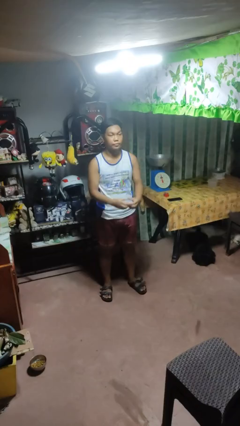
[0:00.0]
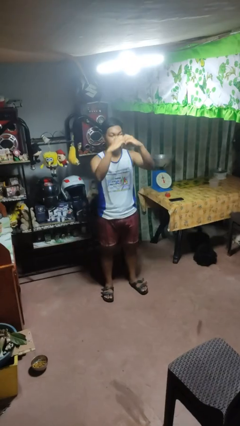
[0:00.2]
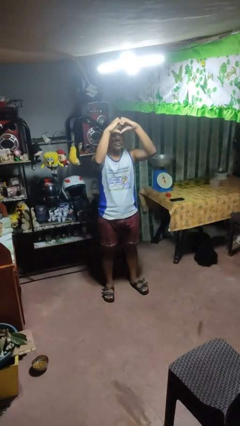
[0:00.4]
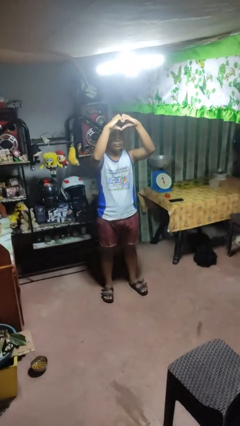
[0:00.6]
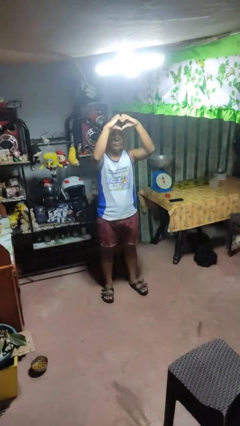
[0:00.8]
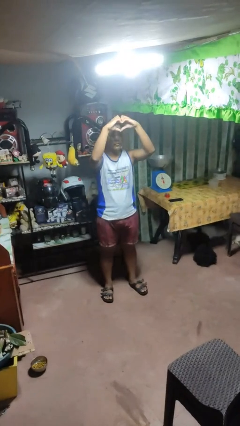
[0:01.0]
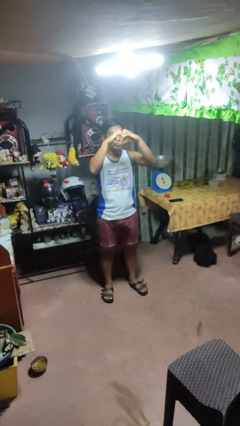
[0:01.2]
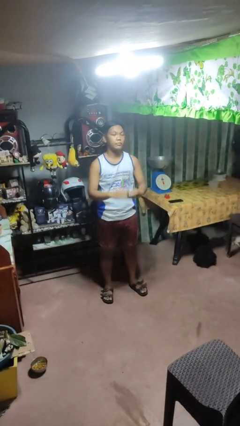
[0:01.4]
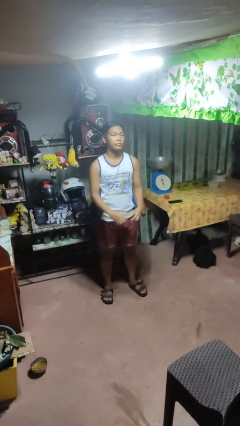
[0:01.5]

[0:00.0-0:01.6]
person gestures heart

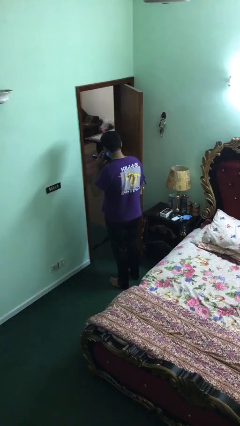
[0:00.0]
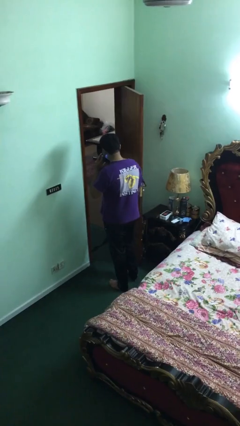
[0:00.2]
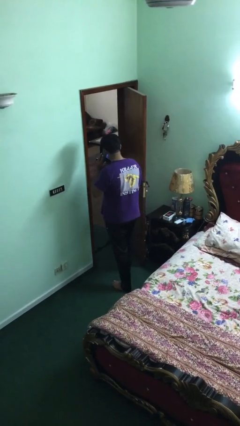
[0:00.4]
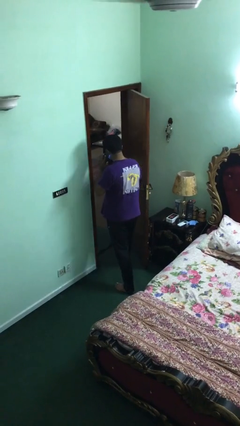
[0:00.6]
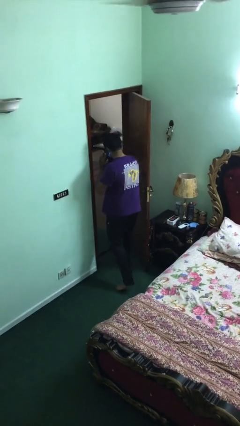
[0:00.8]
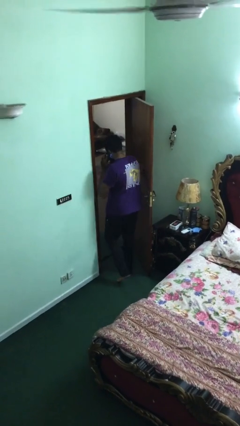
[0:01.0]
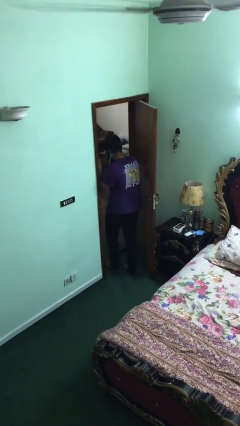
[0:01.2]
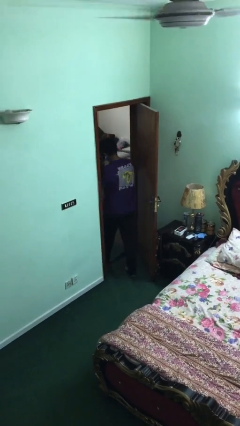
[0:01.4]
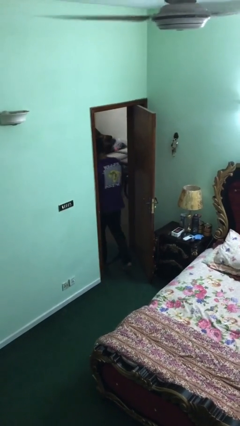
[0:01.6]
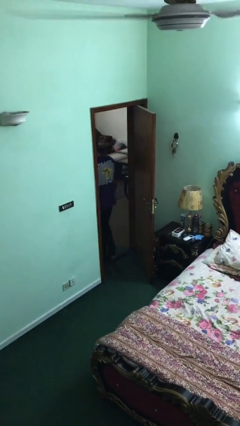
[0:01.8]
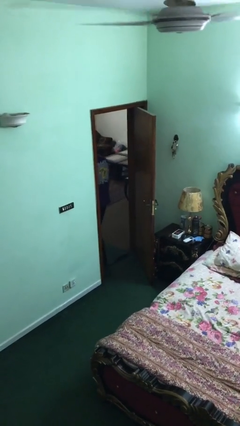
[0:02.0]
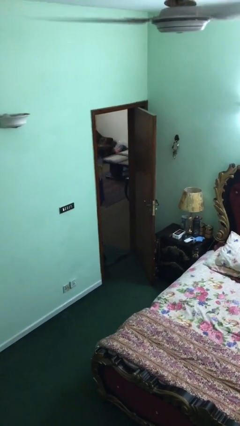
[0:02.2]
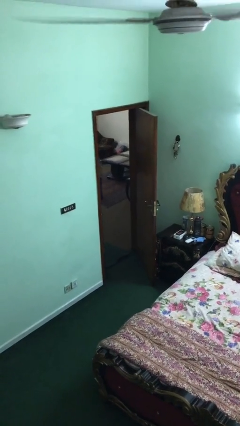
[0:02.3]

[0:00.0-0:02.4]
person exits scene through structure

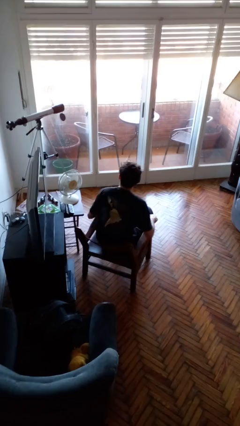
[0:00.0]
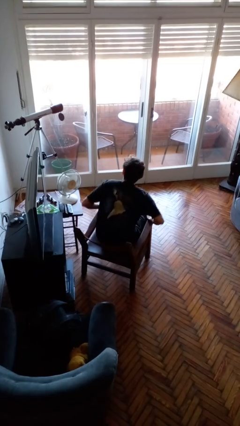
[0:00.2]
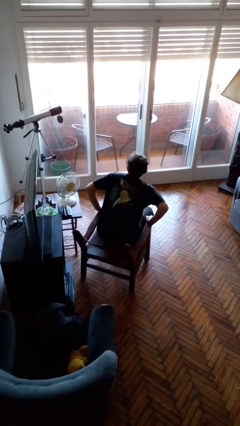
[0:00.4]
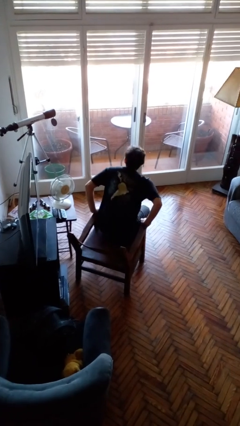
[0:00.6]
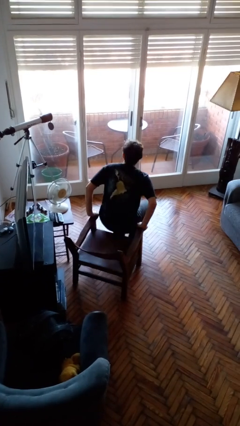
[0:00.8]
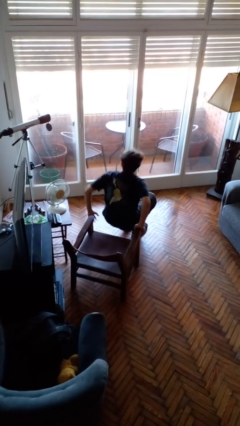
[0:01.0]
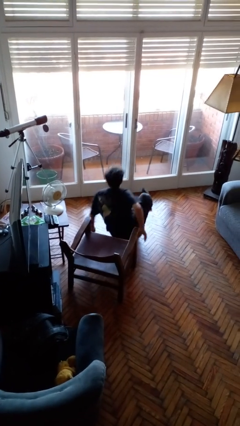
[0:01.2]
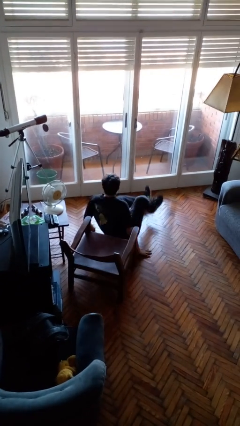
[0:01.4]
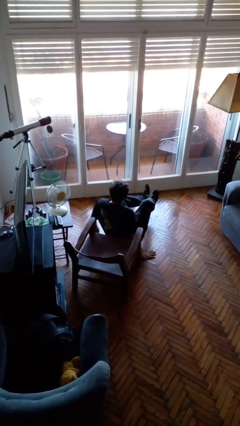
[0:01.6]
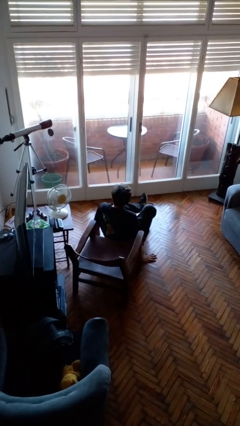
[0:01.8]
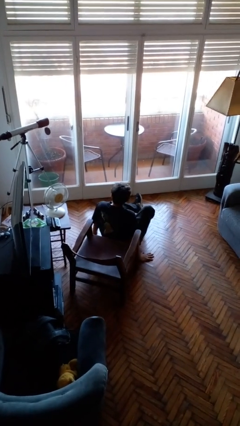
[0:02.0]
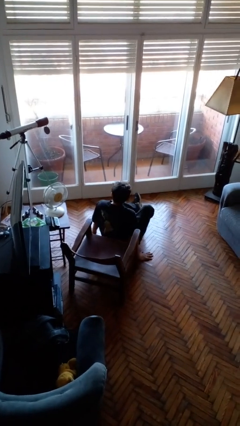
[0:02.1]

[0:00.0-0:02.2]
person falls from chair

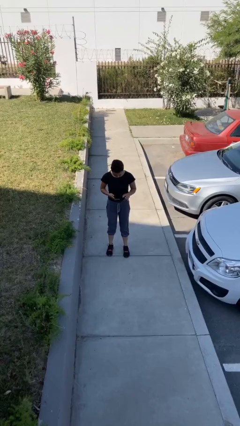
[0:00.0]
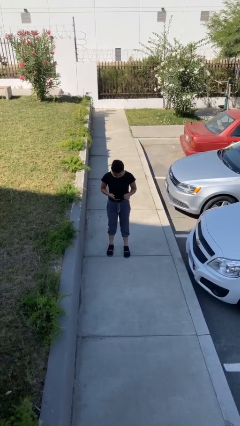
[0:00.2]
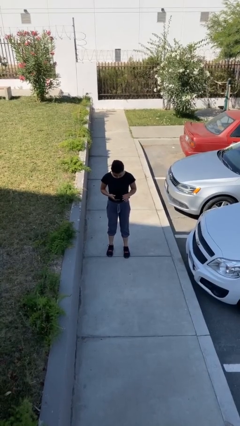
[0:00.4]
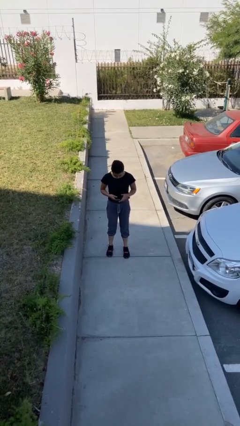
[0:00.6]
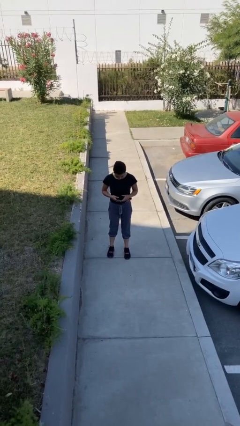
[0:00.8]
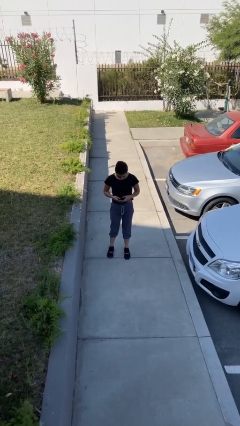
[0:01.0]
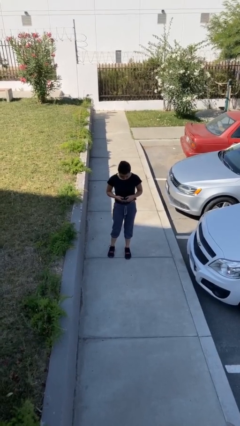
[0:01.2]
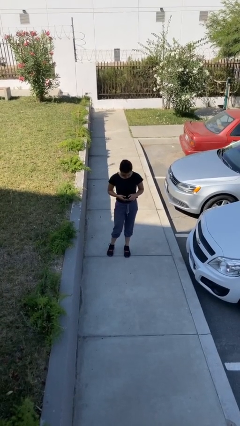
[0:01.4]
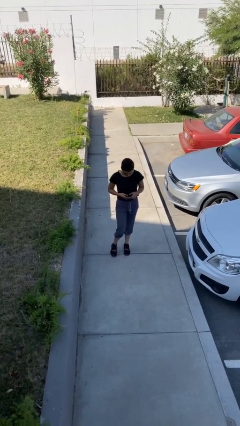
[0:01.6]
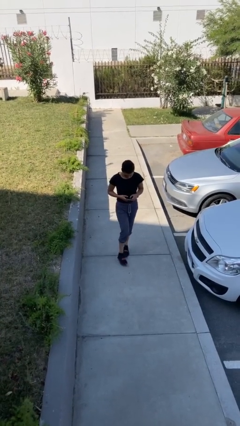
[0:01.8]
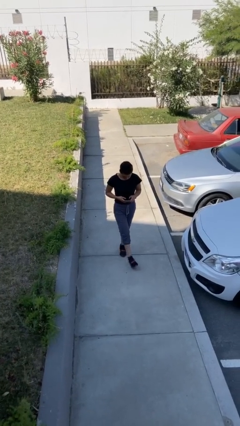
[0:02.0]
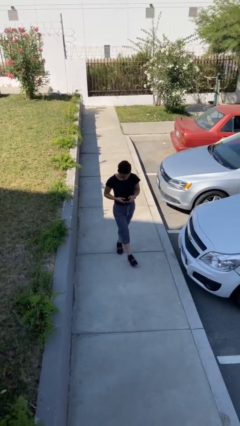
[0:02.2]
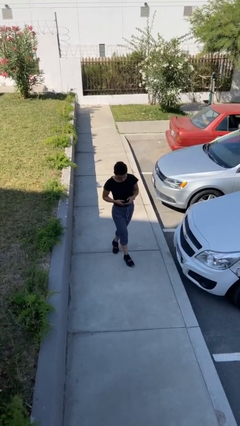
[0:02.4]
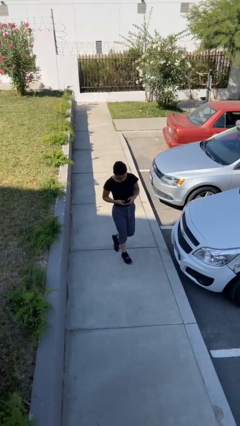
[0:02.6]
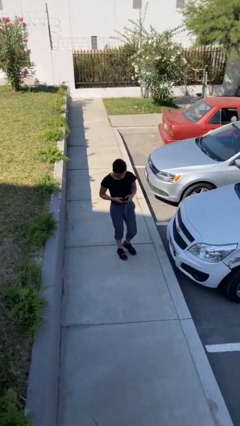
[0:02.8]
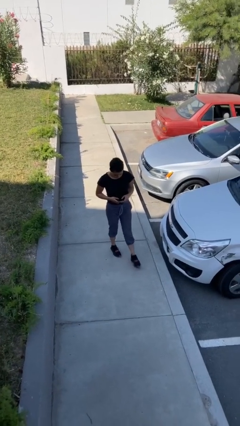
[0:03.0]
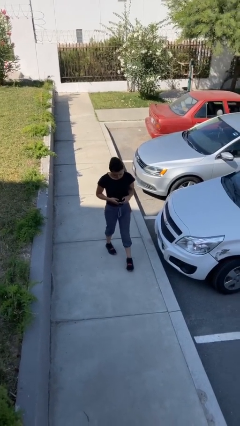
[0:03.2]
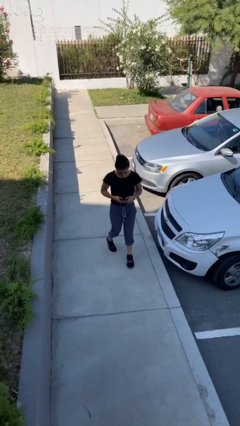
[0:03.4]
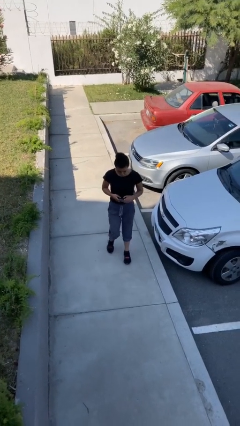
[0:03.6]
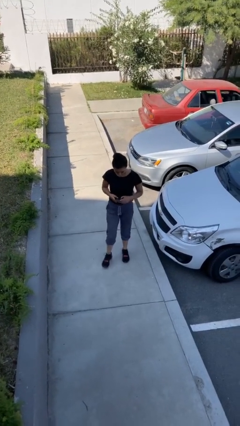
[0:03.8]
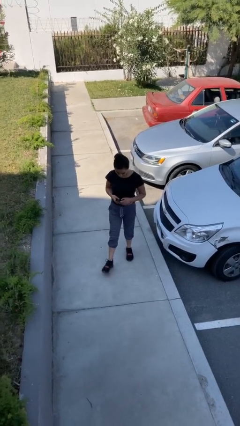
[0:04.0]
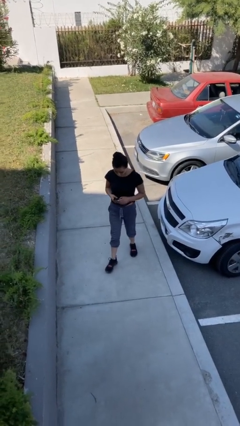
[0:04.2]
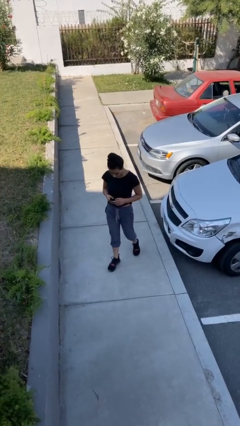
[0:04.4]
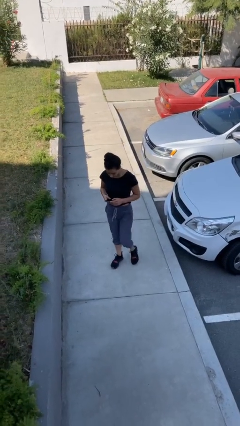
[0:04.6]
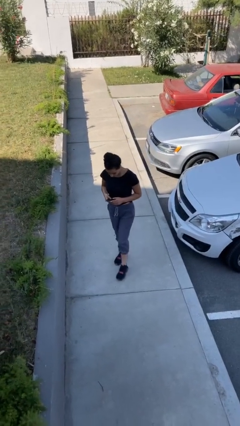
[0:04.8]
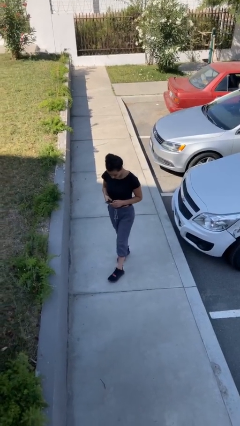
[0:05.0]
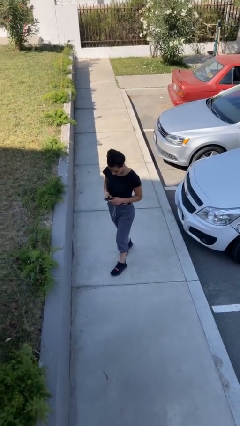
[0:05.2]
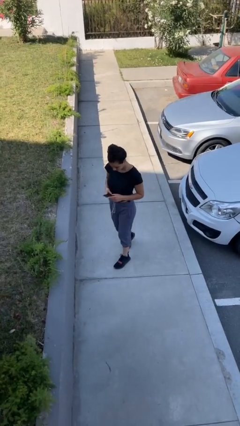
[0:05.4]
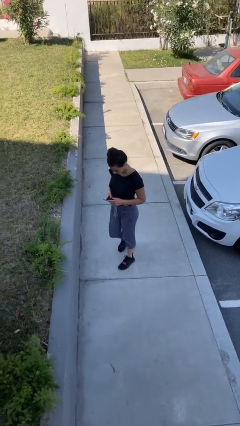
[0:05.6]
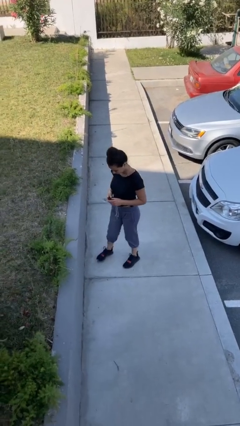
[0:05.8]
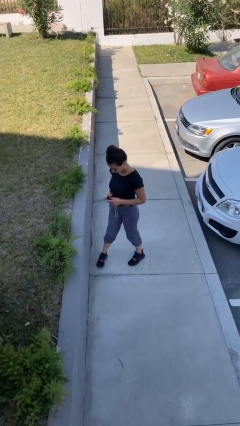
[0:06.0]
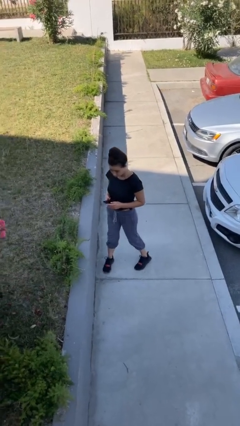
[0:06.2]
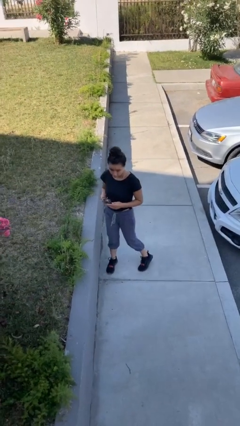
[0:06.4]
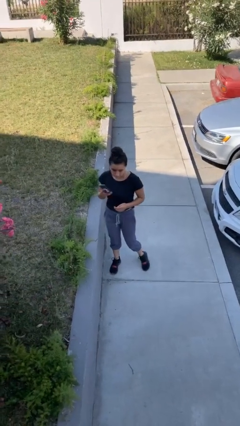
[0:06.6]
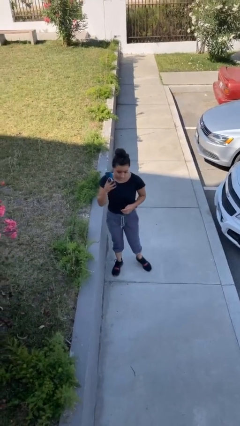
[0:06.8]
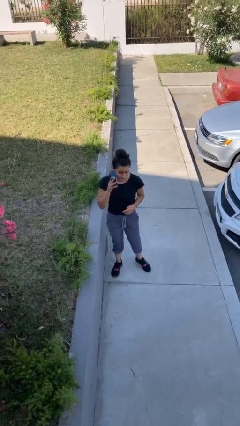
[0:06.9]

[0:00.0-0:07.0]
person texts on phone

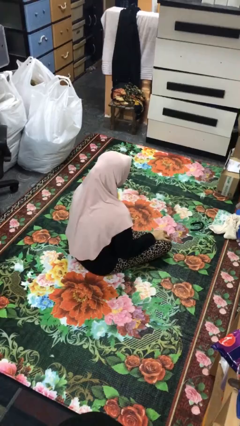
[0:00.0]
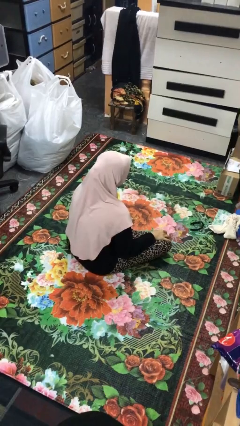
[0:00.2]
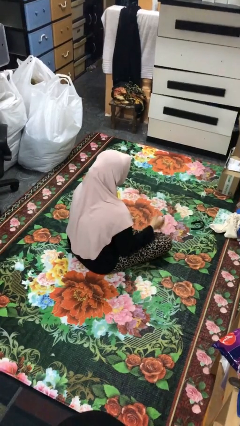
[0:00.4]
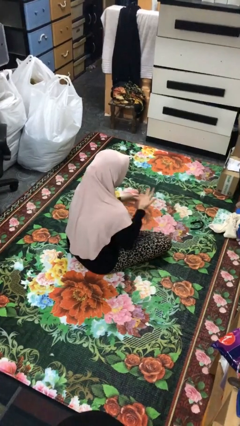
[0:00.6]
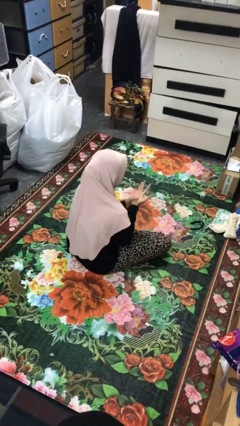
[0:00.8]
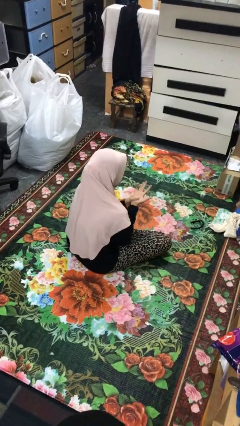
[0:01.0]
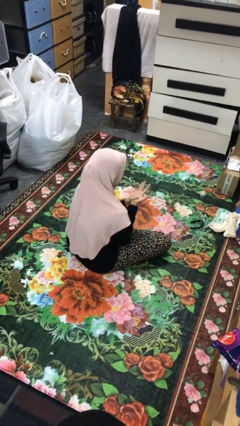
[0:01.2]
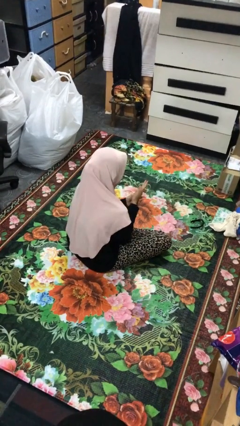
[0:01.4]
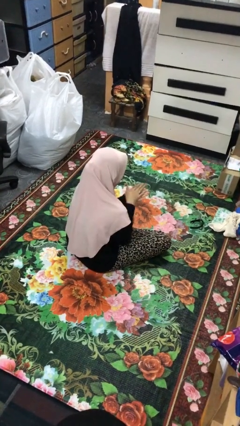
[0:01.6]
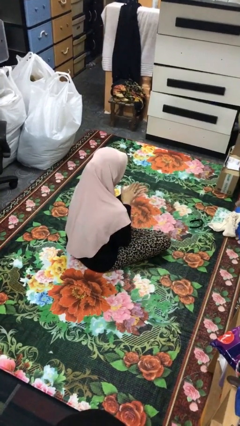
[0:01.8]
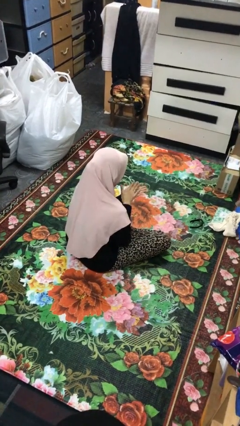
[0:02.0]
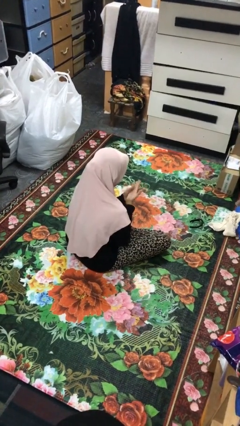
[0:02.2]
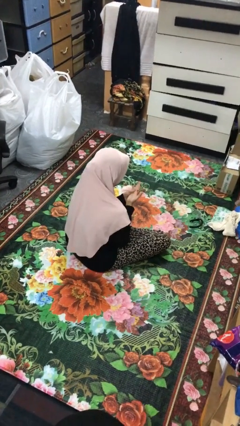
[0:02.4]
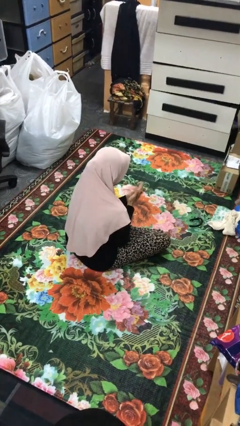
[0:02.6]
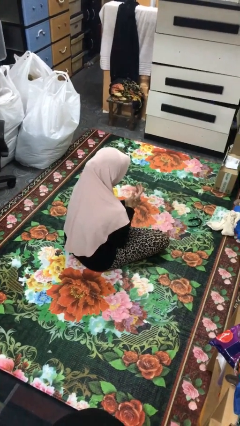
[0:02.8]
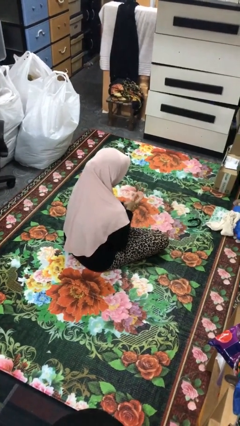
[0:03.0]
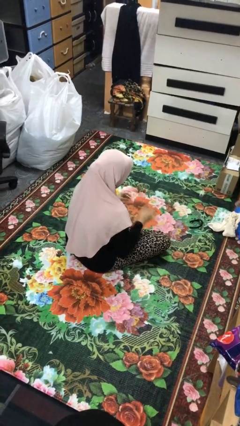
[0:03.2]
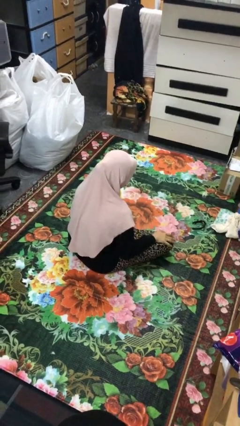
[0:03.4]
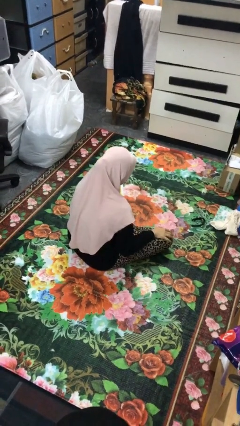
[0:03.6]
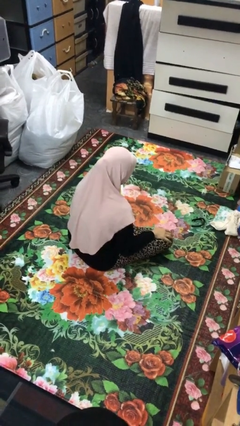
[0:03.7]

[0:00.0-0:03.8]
person looks at hands in lap

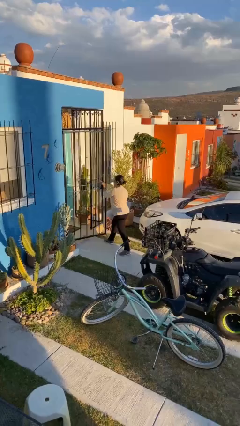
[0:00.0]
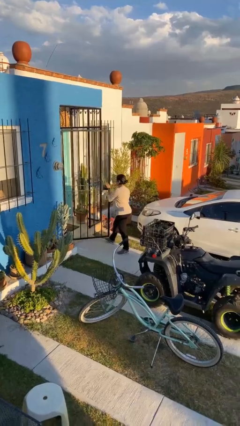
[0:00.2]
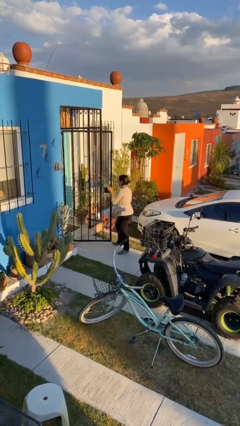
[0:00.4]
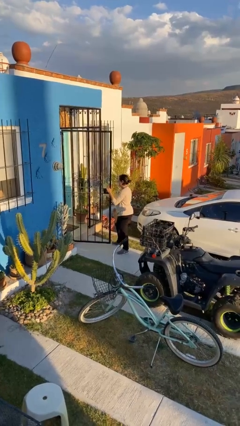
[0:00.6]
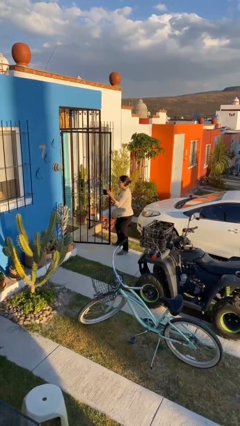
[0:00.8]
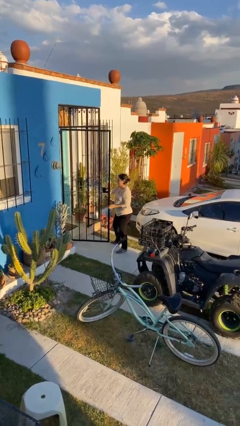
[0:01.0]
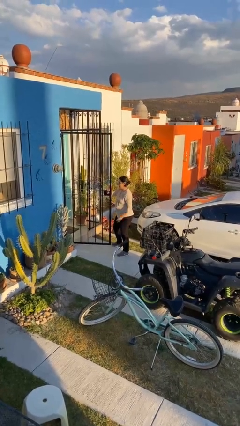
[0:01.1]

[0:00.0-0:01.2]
person opens facility door
